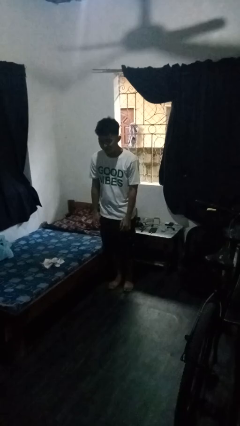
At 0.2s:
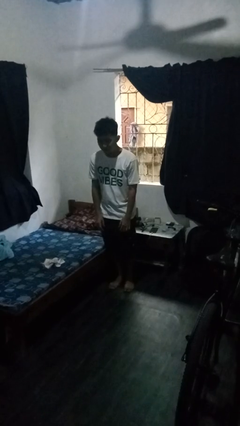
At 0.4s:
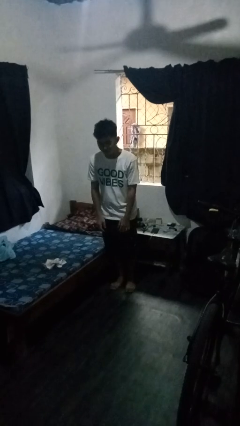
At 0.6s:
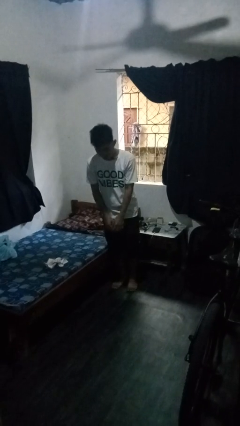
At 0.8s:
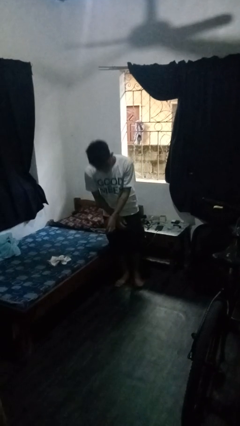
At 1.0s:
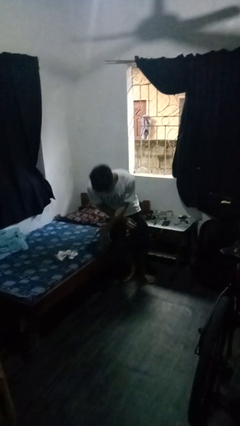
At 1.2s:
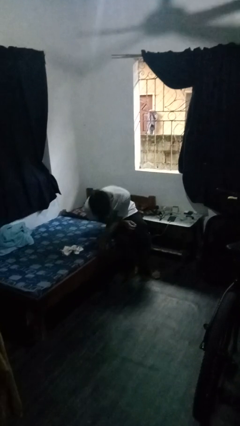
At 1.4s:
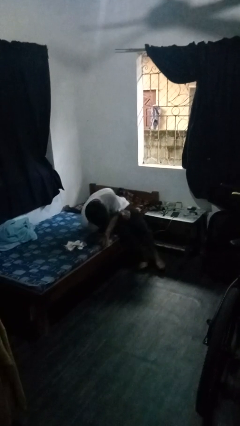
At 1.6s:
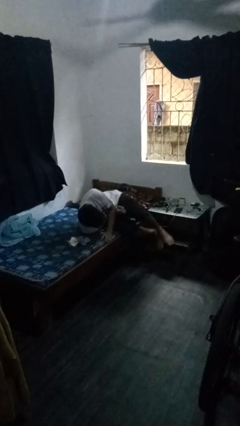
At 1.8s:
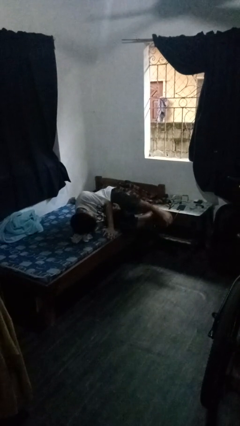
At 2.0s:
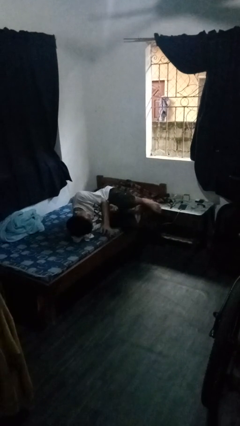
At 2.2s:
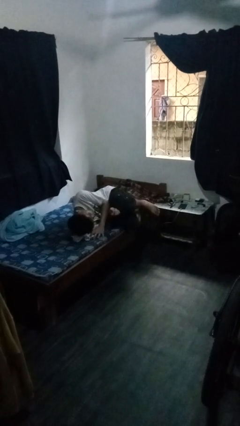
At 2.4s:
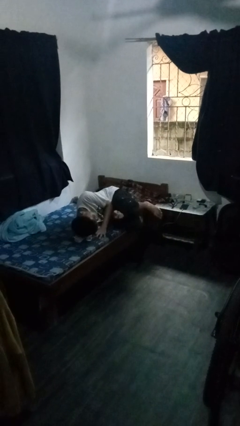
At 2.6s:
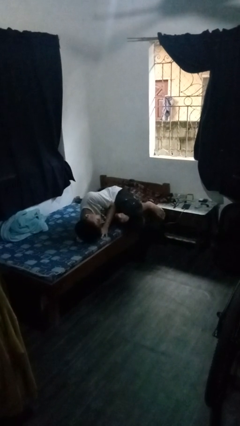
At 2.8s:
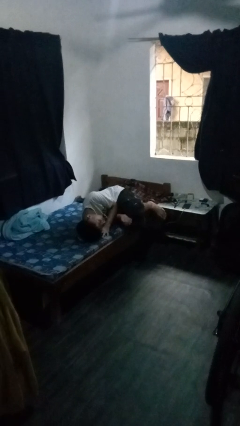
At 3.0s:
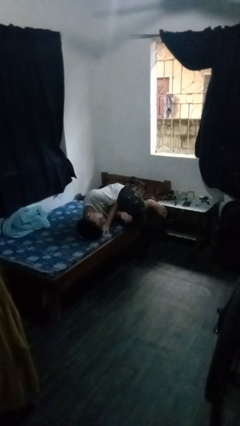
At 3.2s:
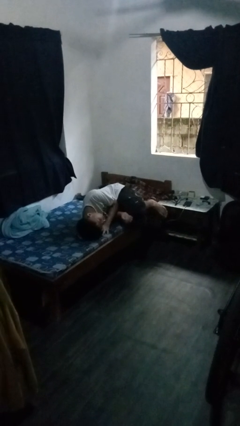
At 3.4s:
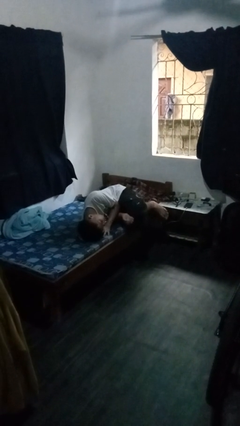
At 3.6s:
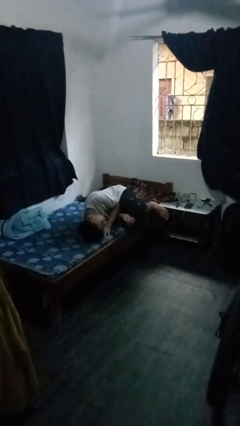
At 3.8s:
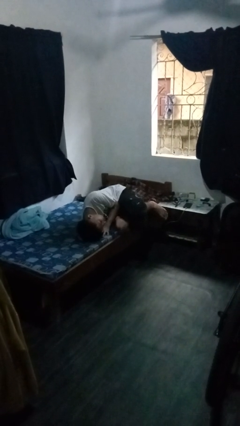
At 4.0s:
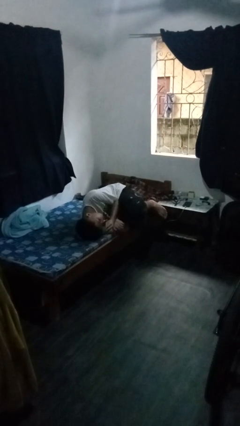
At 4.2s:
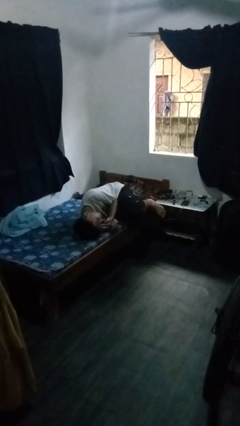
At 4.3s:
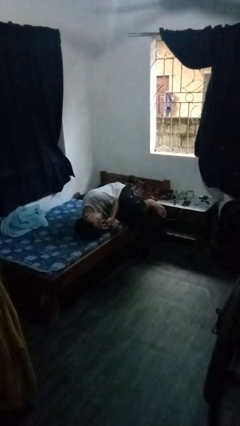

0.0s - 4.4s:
person lies down on bed

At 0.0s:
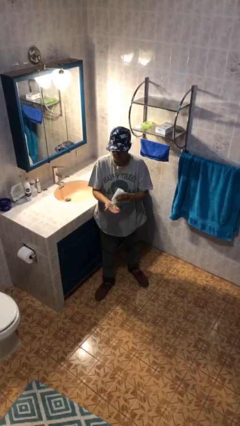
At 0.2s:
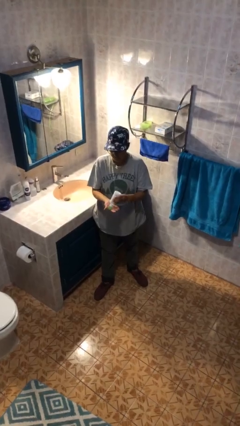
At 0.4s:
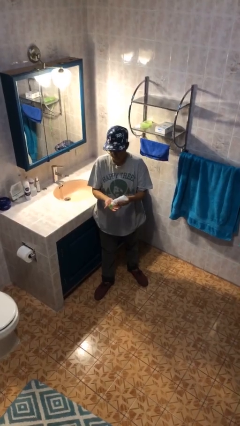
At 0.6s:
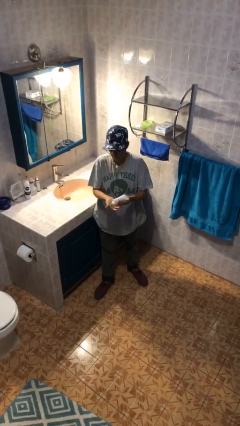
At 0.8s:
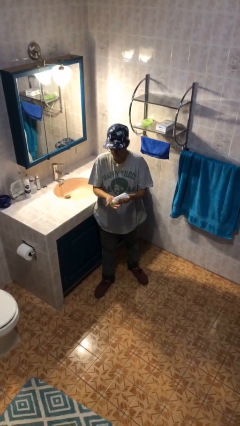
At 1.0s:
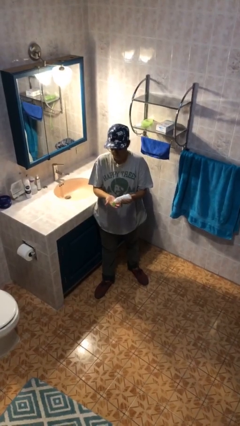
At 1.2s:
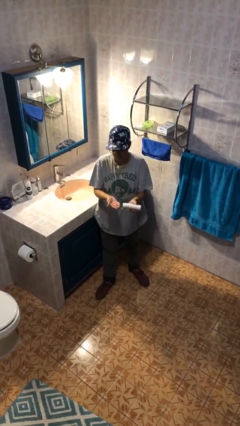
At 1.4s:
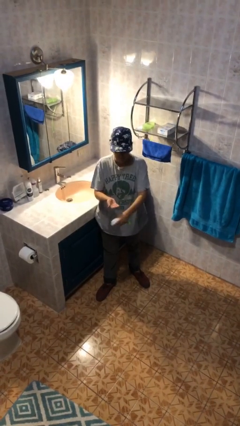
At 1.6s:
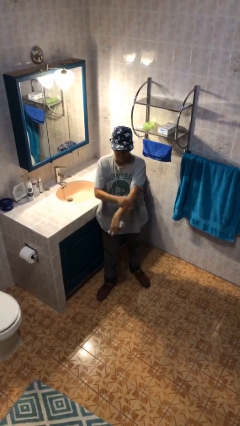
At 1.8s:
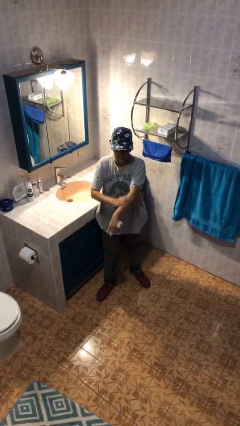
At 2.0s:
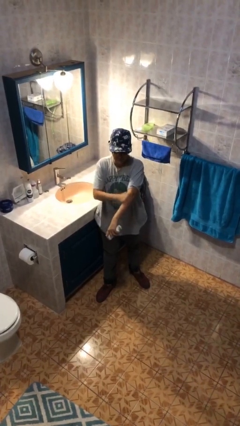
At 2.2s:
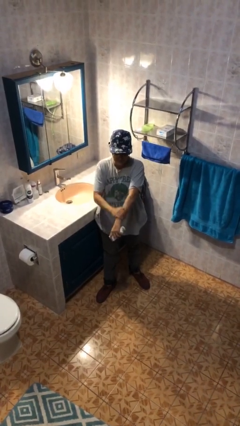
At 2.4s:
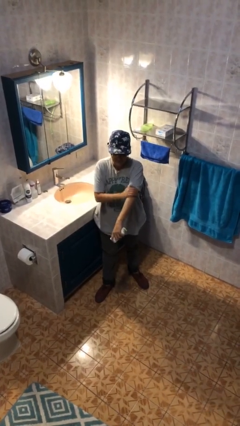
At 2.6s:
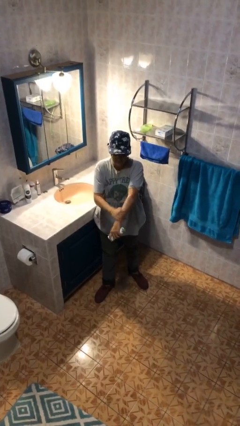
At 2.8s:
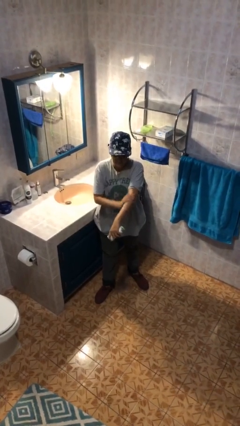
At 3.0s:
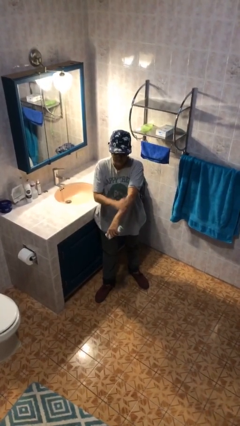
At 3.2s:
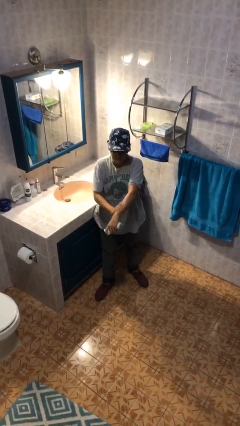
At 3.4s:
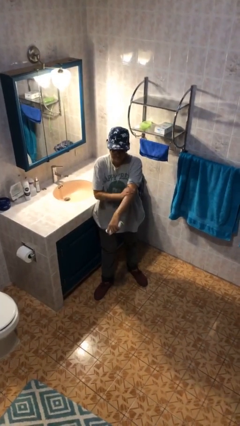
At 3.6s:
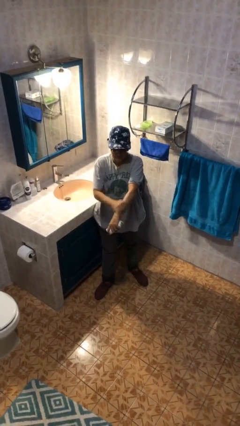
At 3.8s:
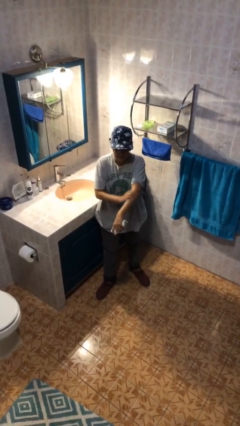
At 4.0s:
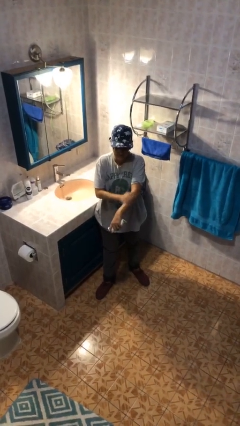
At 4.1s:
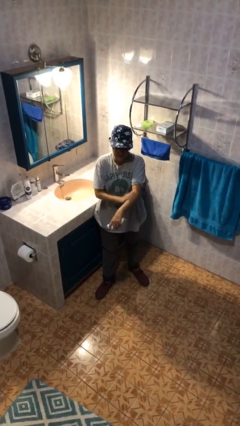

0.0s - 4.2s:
person applies sunscreen

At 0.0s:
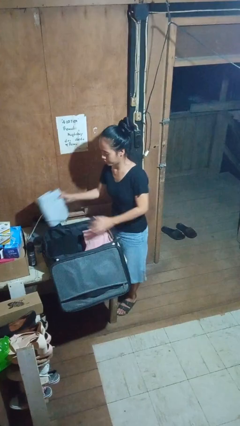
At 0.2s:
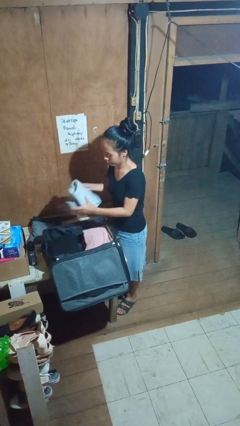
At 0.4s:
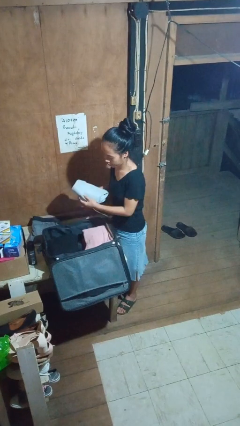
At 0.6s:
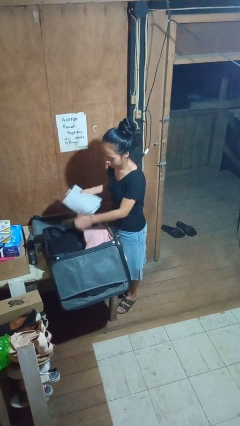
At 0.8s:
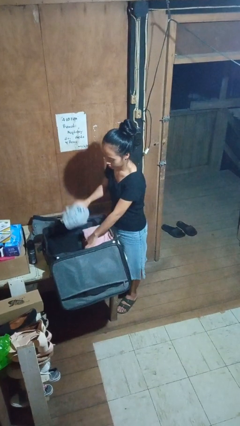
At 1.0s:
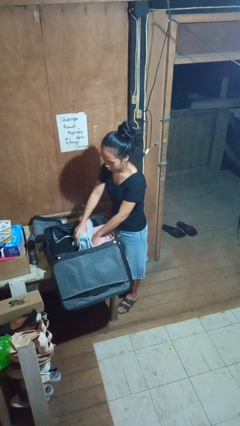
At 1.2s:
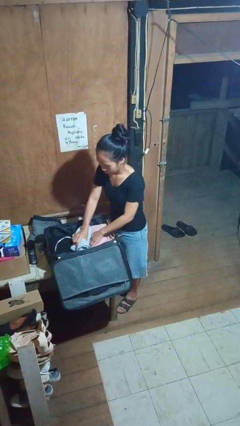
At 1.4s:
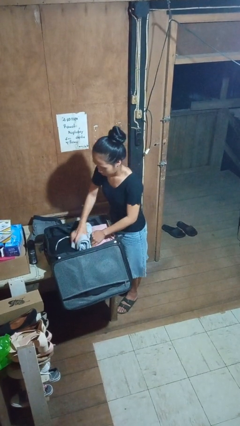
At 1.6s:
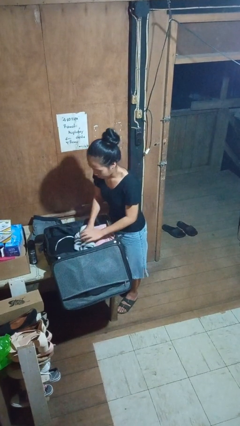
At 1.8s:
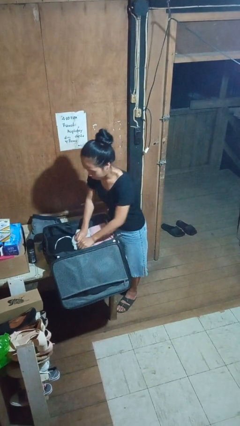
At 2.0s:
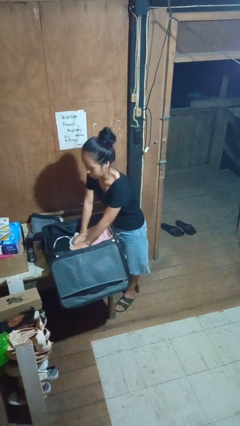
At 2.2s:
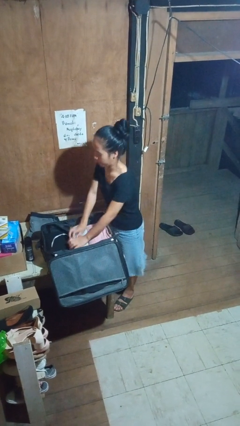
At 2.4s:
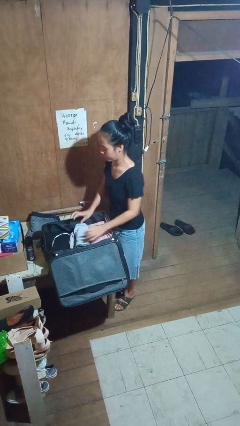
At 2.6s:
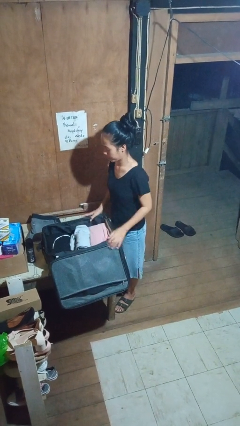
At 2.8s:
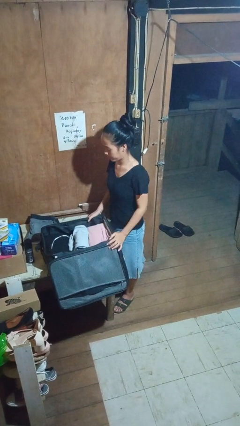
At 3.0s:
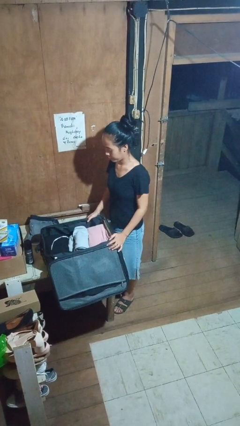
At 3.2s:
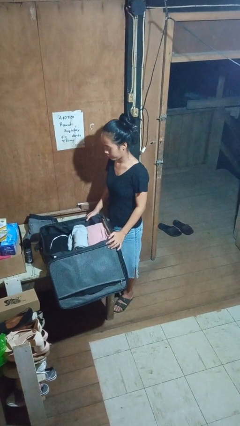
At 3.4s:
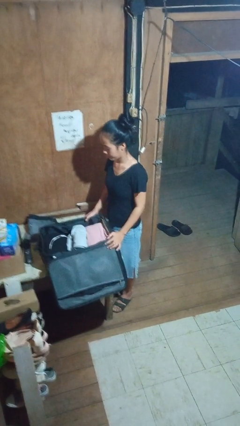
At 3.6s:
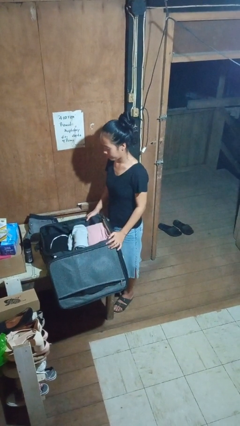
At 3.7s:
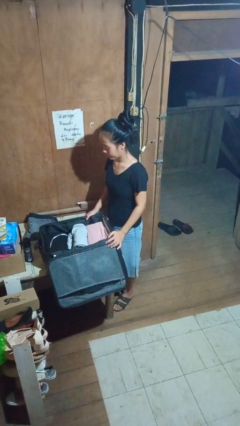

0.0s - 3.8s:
person loads clothes into suitcase

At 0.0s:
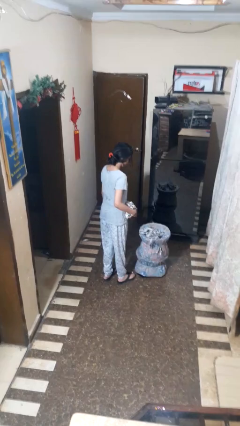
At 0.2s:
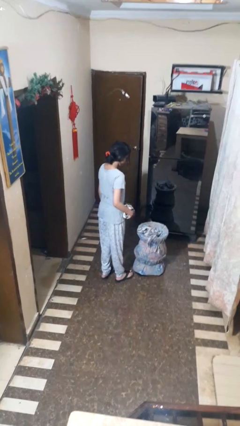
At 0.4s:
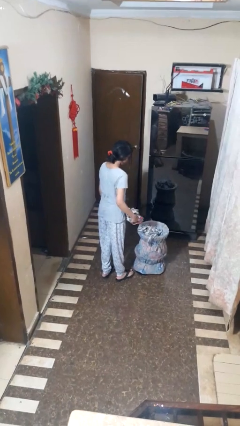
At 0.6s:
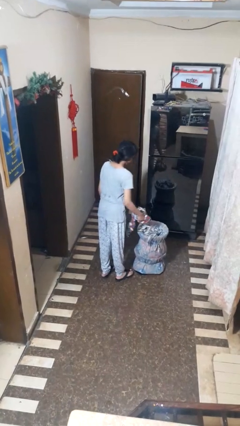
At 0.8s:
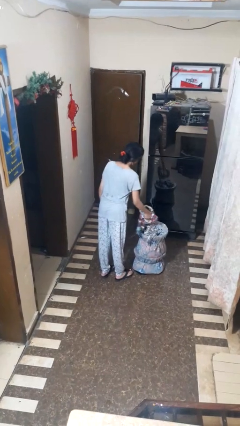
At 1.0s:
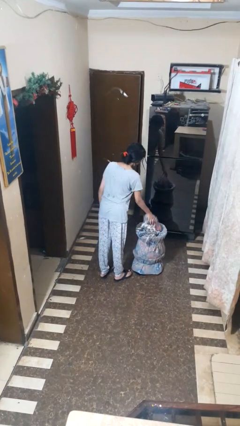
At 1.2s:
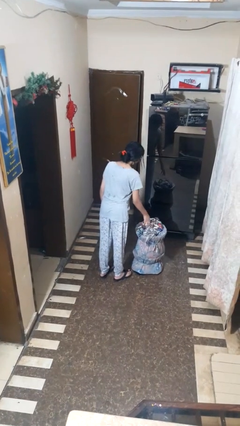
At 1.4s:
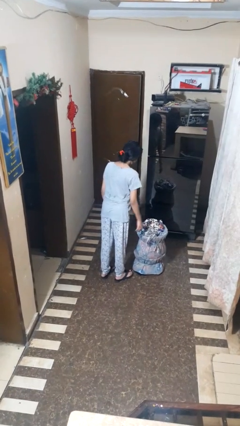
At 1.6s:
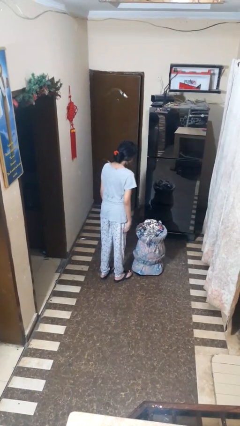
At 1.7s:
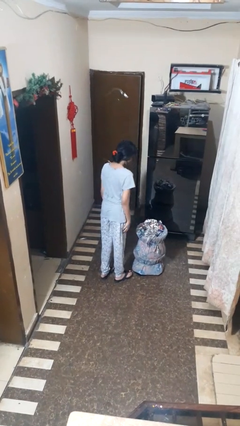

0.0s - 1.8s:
person puts object into basket

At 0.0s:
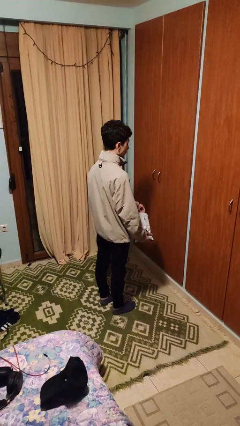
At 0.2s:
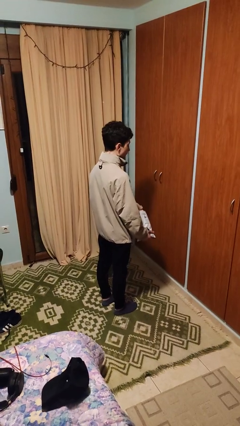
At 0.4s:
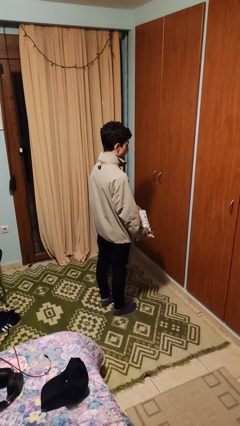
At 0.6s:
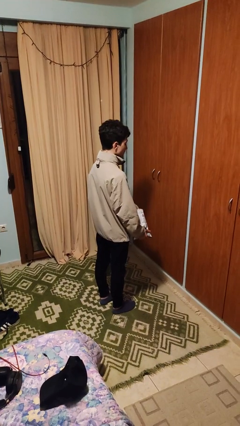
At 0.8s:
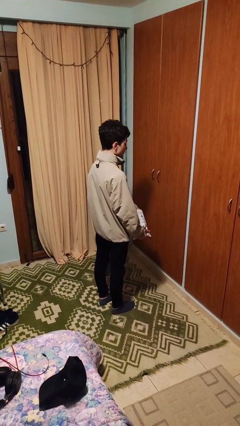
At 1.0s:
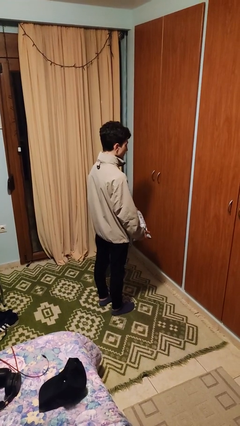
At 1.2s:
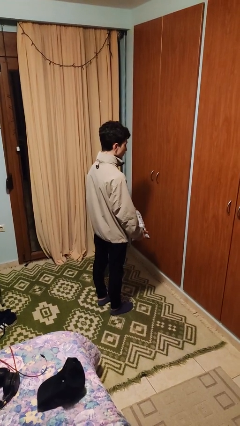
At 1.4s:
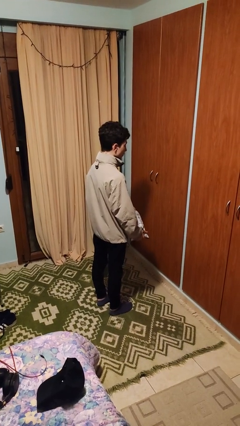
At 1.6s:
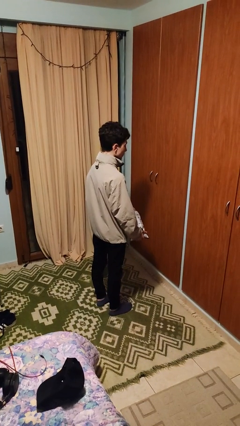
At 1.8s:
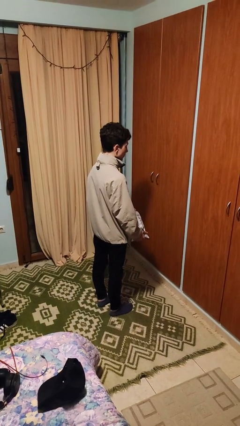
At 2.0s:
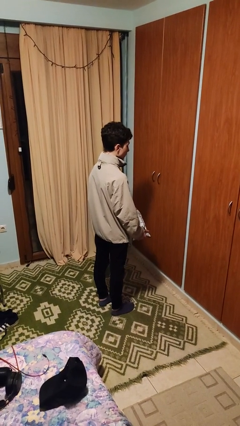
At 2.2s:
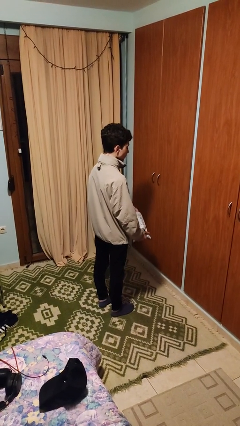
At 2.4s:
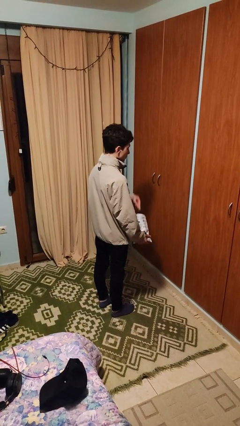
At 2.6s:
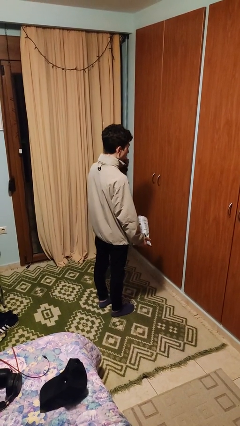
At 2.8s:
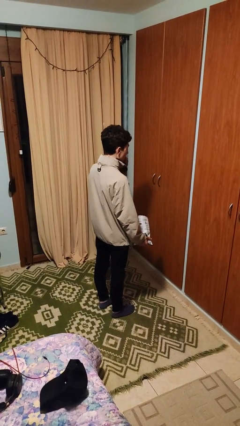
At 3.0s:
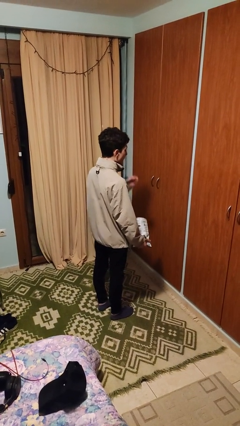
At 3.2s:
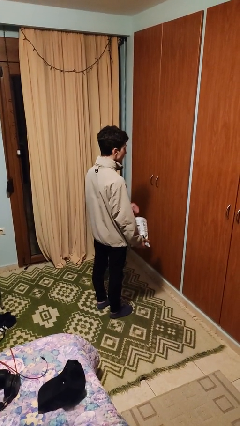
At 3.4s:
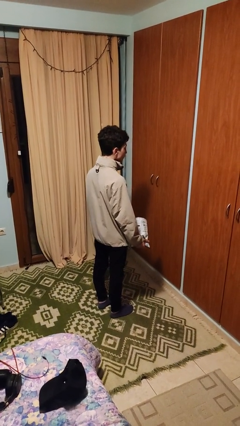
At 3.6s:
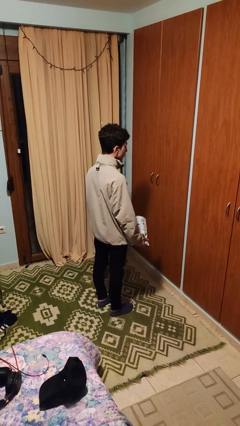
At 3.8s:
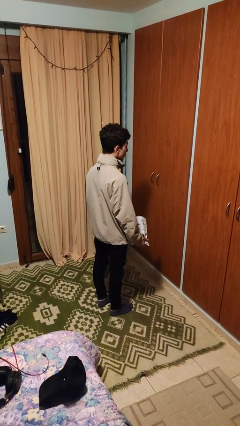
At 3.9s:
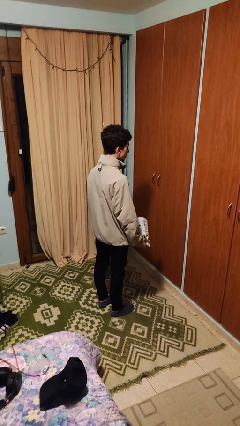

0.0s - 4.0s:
person eats snack from bag
